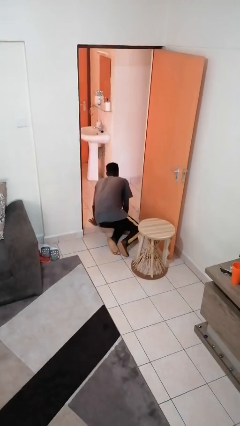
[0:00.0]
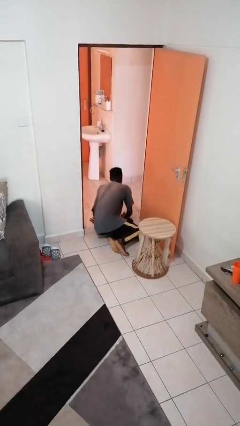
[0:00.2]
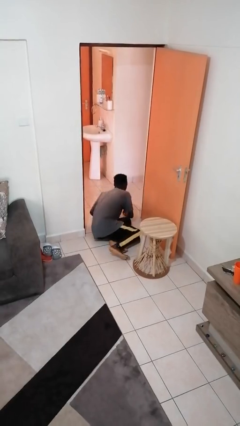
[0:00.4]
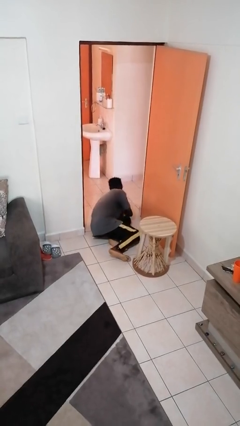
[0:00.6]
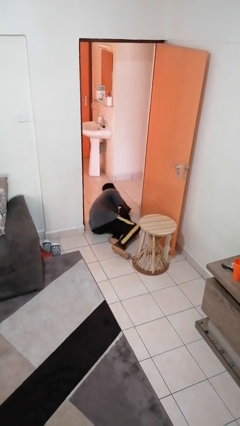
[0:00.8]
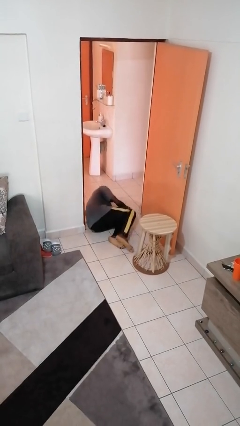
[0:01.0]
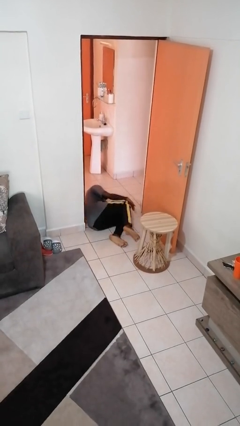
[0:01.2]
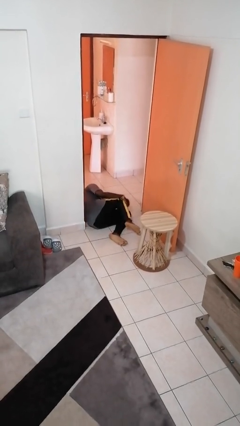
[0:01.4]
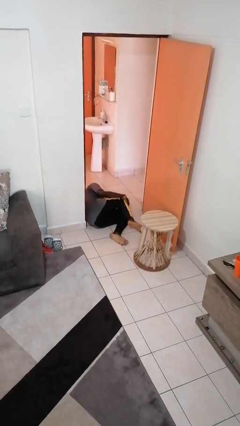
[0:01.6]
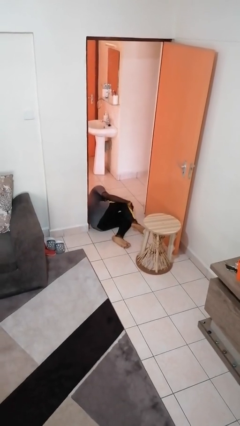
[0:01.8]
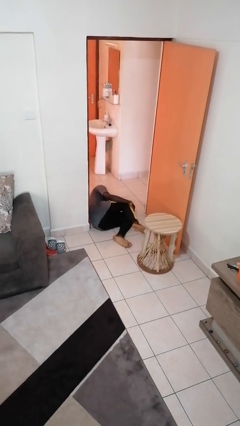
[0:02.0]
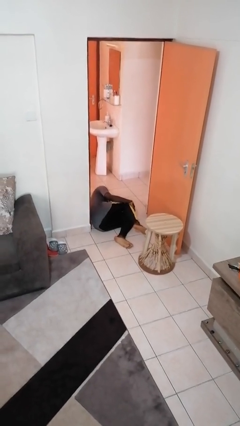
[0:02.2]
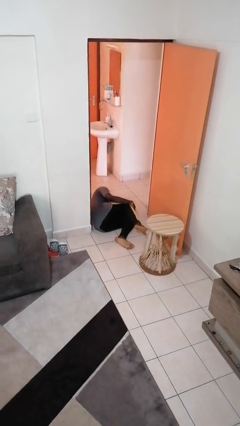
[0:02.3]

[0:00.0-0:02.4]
person lies down on floor

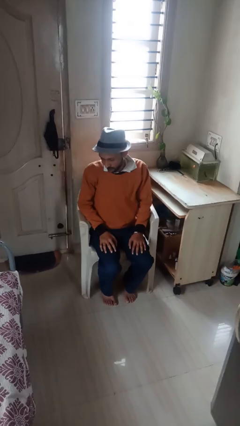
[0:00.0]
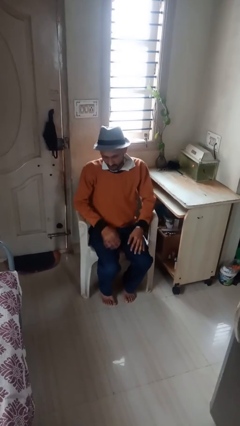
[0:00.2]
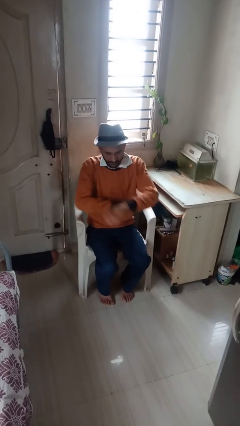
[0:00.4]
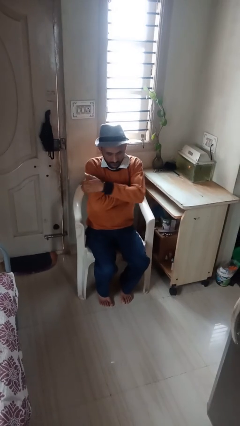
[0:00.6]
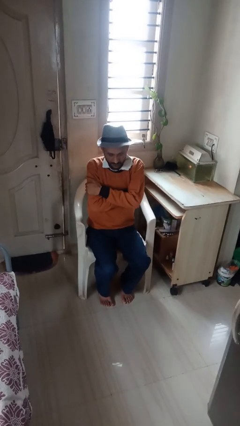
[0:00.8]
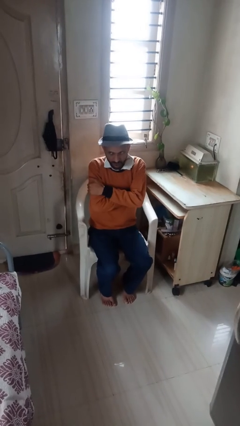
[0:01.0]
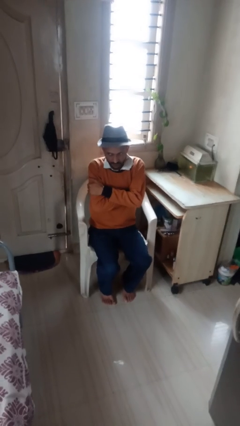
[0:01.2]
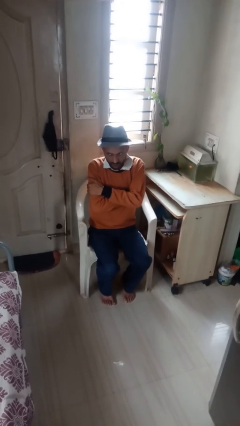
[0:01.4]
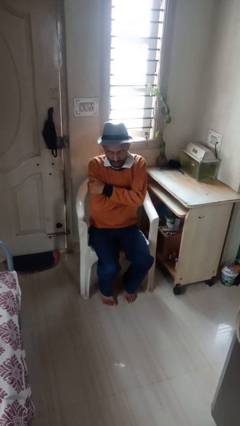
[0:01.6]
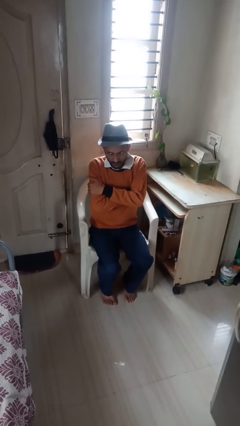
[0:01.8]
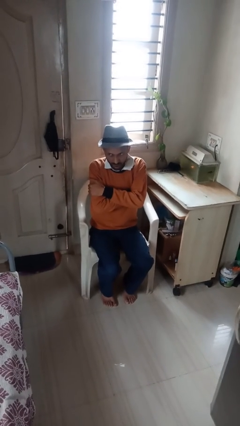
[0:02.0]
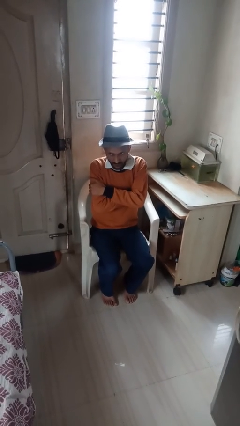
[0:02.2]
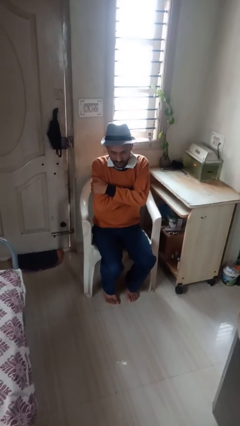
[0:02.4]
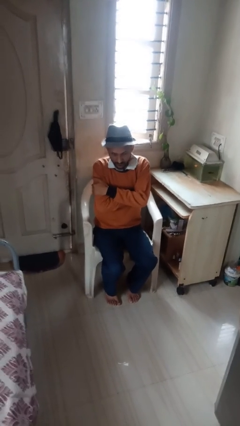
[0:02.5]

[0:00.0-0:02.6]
person crosses arms

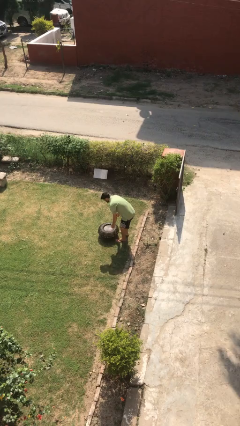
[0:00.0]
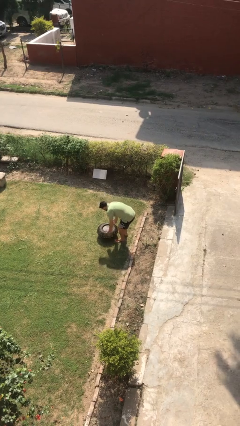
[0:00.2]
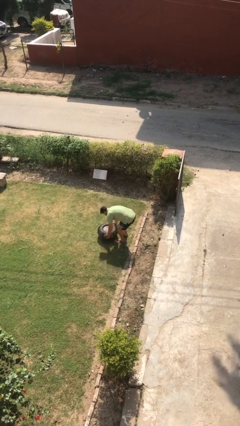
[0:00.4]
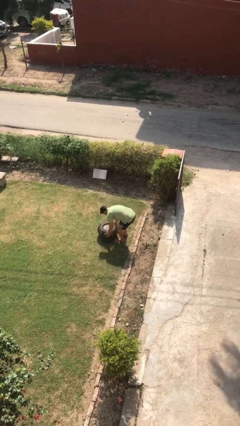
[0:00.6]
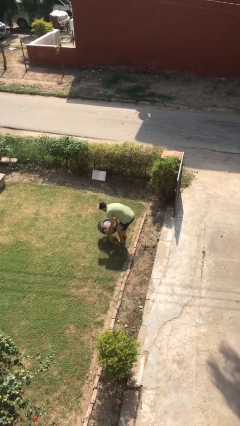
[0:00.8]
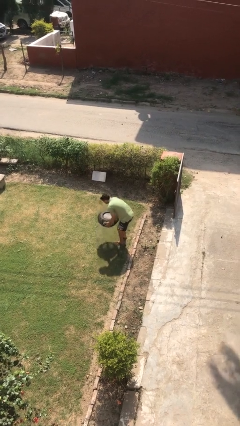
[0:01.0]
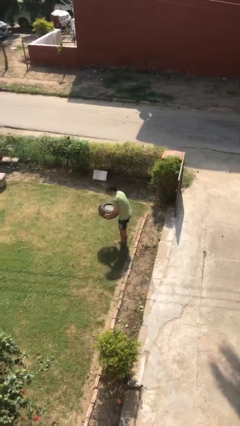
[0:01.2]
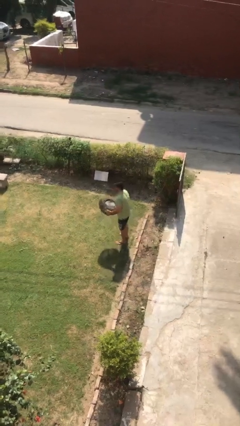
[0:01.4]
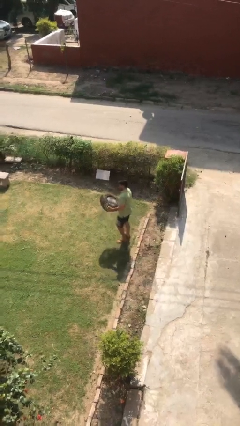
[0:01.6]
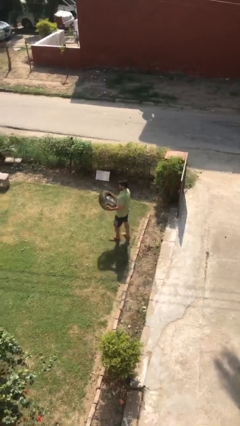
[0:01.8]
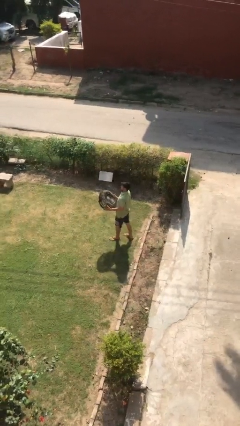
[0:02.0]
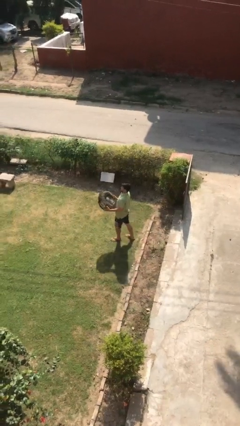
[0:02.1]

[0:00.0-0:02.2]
person picks up object from floor

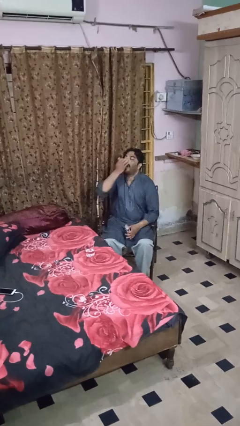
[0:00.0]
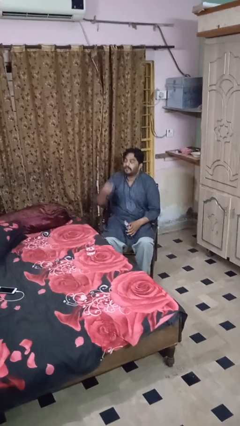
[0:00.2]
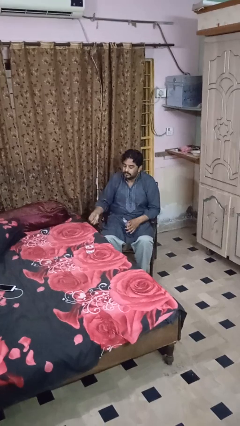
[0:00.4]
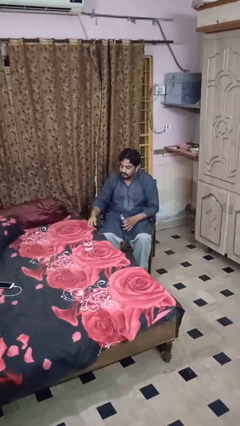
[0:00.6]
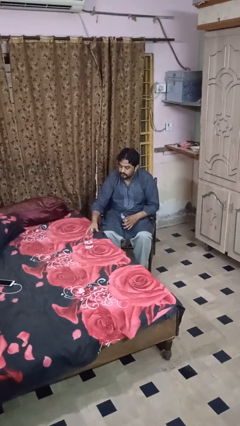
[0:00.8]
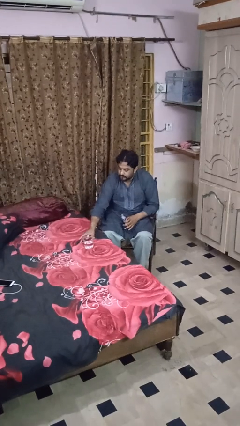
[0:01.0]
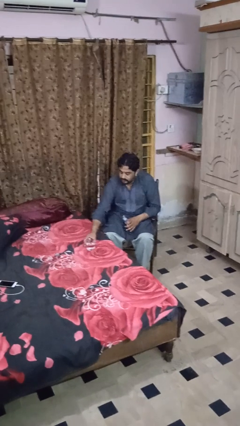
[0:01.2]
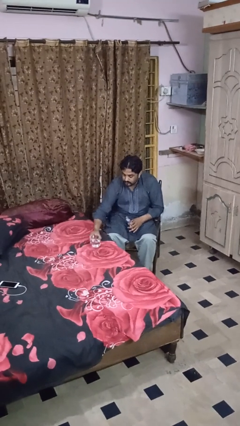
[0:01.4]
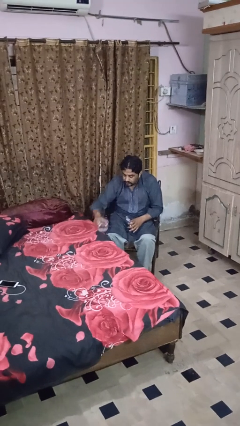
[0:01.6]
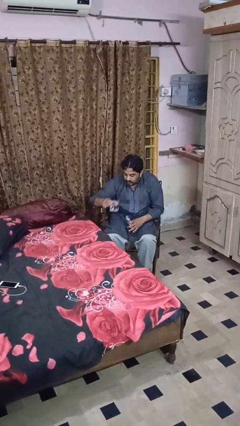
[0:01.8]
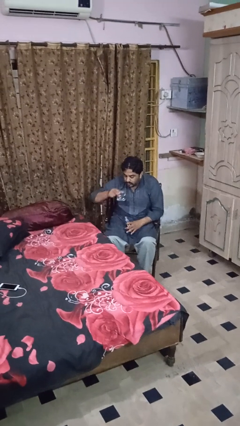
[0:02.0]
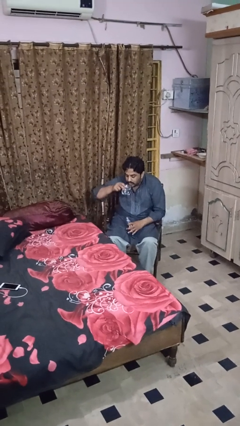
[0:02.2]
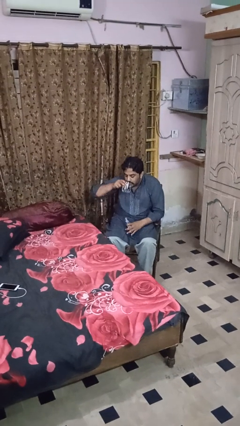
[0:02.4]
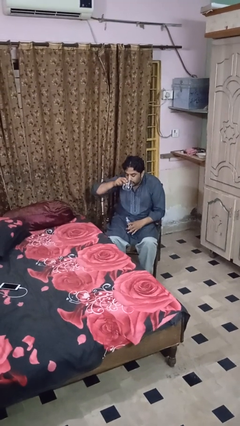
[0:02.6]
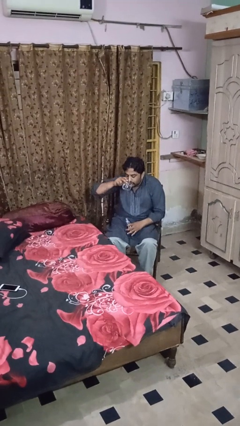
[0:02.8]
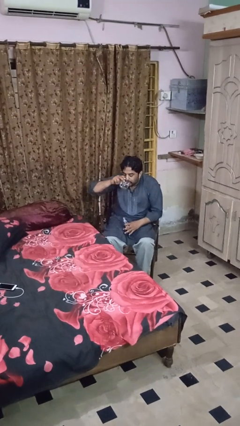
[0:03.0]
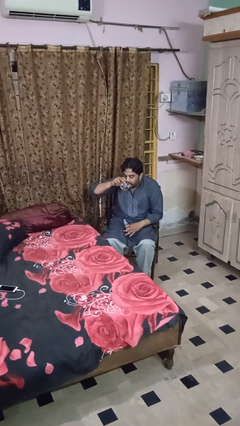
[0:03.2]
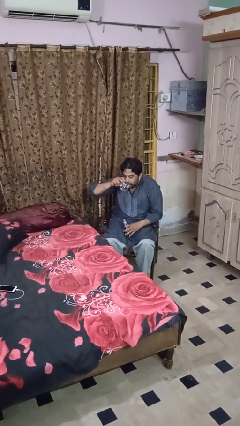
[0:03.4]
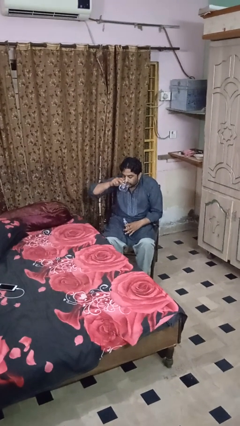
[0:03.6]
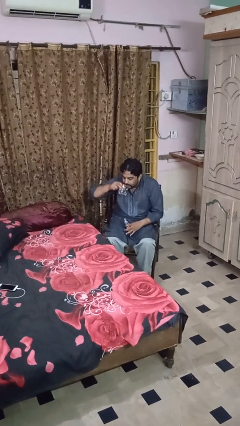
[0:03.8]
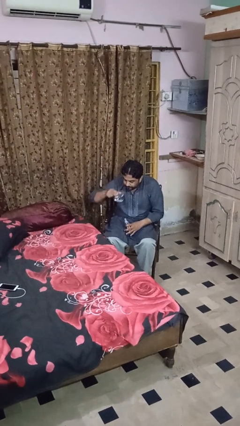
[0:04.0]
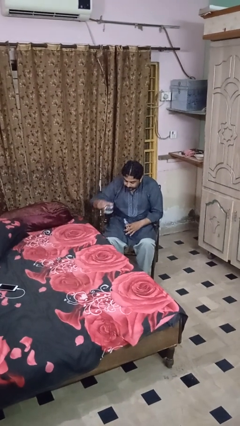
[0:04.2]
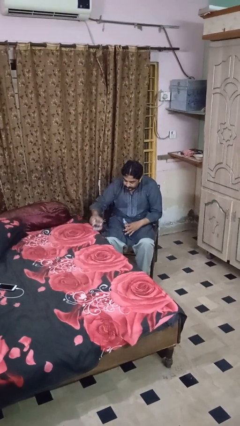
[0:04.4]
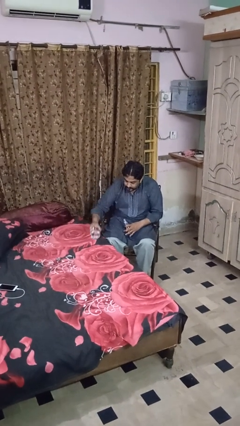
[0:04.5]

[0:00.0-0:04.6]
person drinks from cup

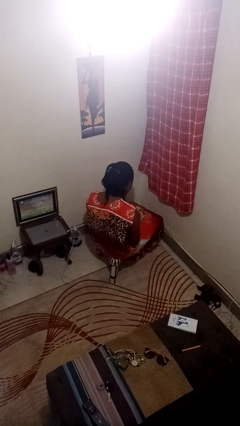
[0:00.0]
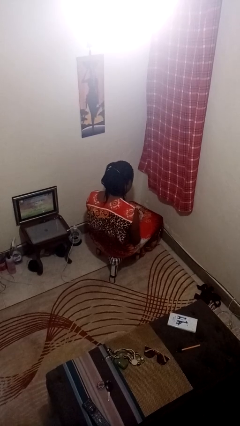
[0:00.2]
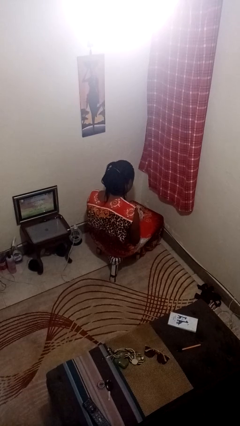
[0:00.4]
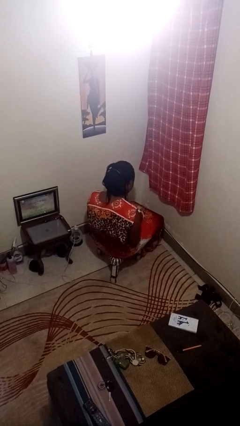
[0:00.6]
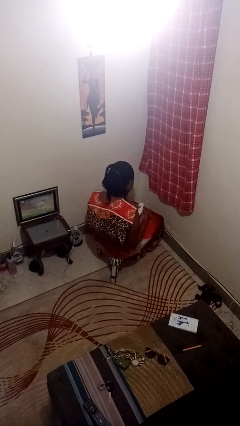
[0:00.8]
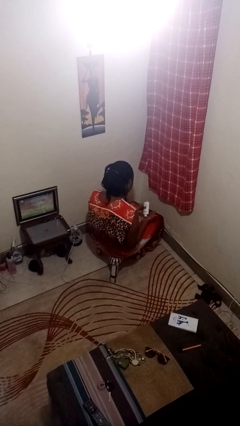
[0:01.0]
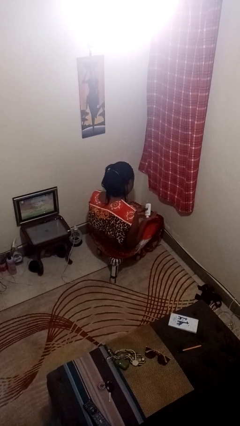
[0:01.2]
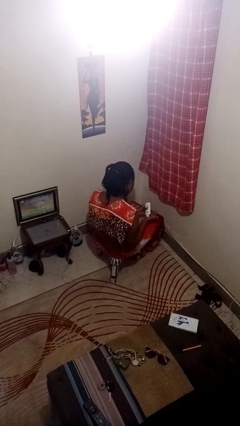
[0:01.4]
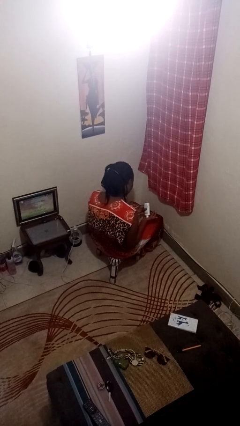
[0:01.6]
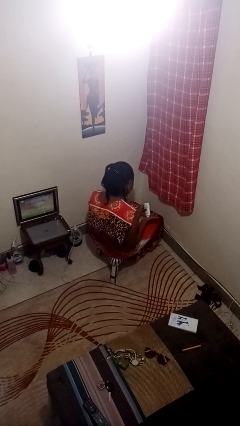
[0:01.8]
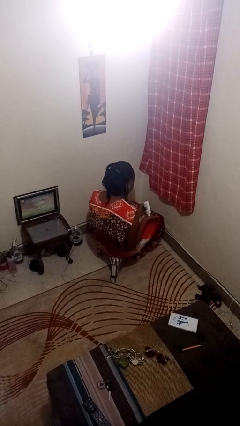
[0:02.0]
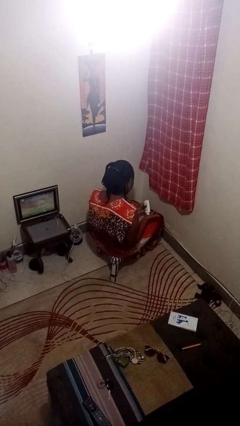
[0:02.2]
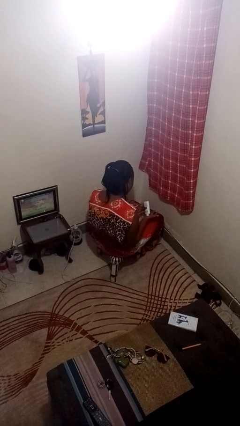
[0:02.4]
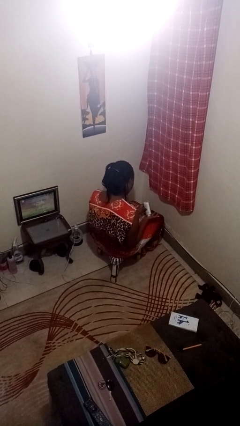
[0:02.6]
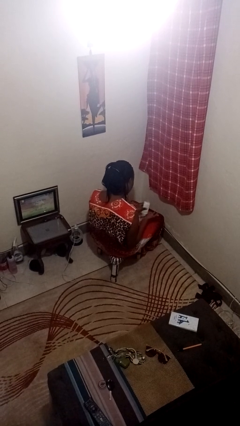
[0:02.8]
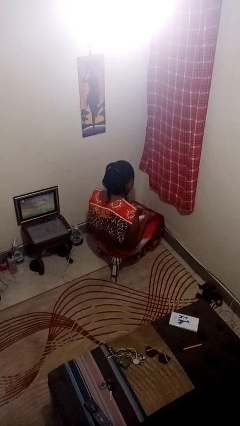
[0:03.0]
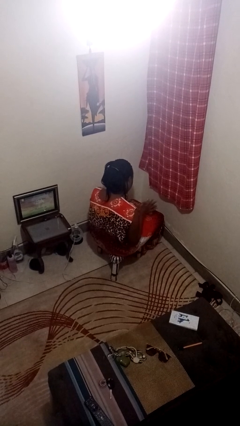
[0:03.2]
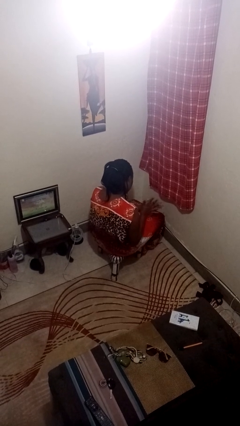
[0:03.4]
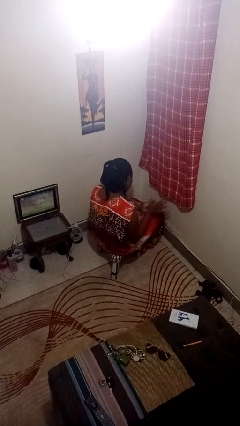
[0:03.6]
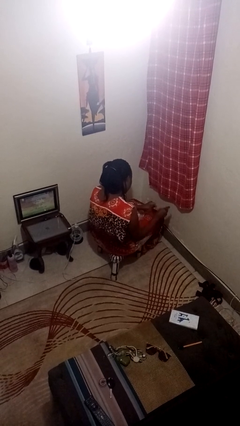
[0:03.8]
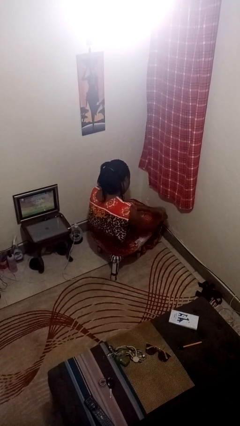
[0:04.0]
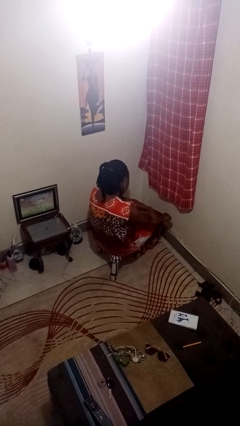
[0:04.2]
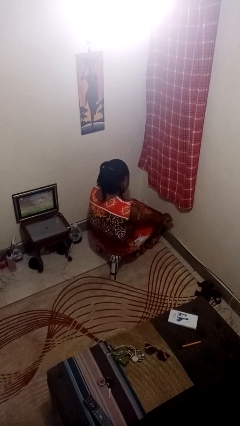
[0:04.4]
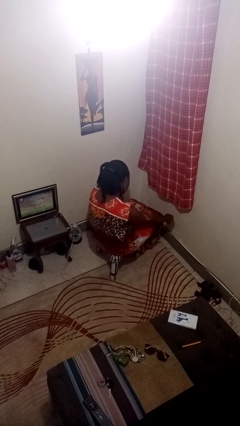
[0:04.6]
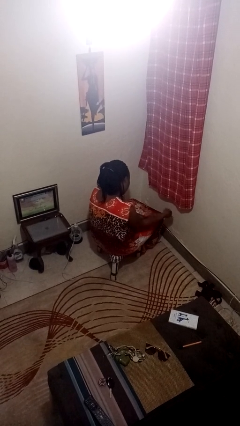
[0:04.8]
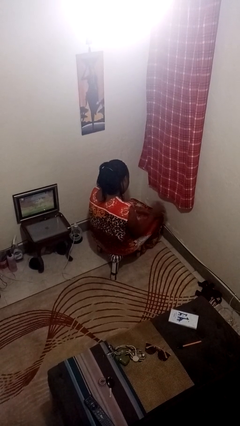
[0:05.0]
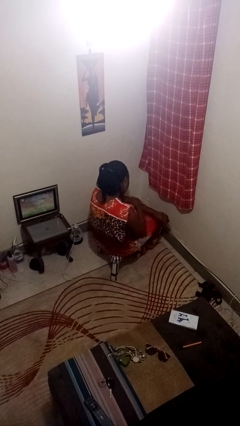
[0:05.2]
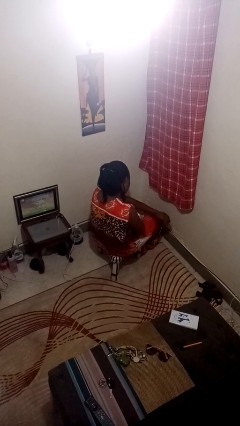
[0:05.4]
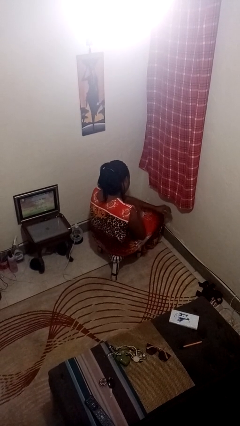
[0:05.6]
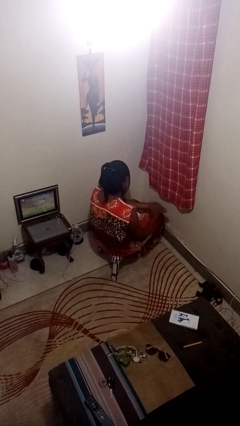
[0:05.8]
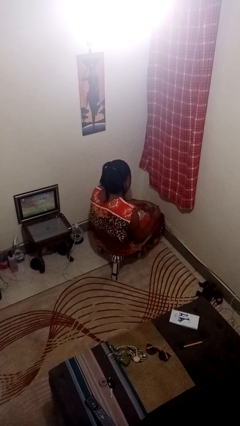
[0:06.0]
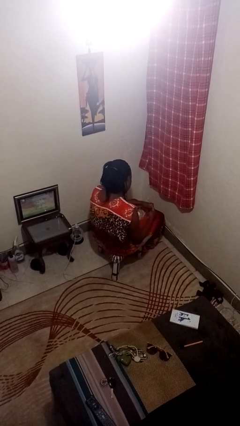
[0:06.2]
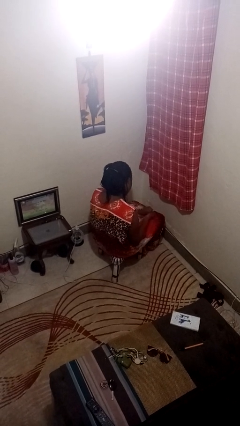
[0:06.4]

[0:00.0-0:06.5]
person applies sunscreen
